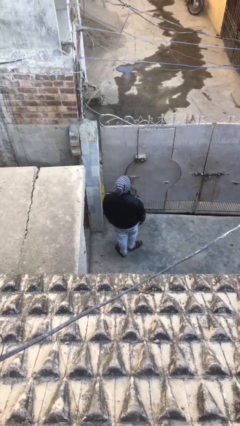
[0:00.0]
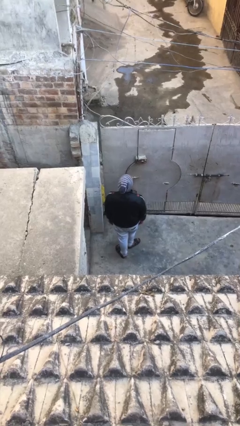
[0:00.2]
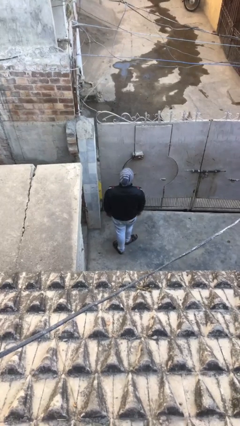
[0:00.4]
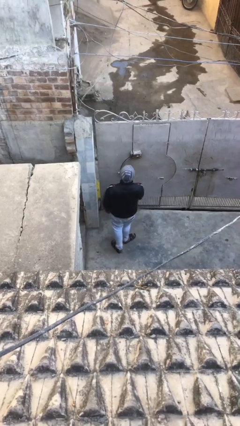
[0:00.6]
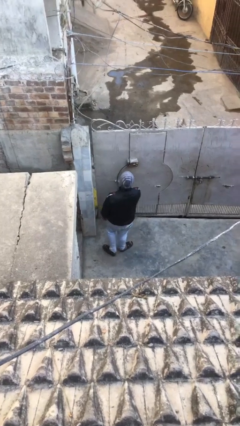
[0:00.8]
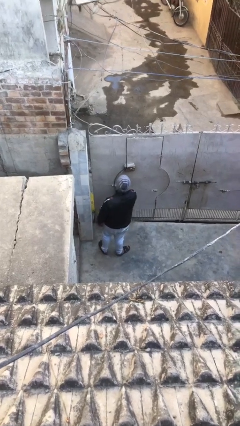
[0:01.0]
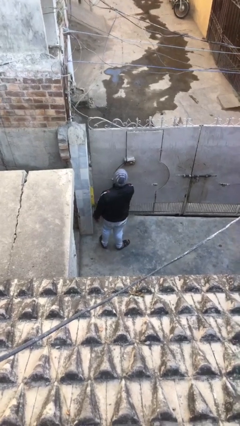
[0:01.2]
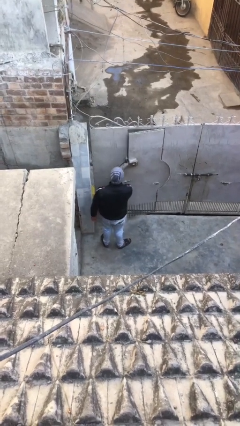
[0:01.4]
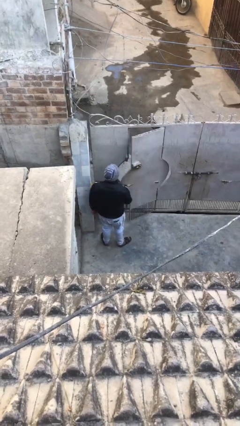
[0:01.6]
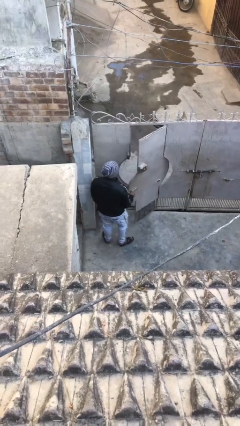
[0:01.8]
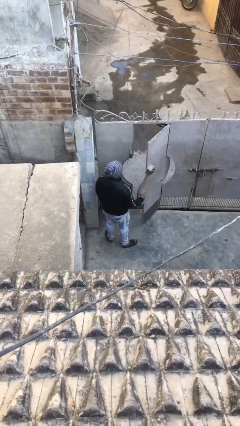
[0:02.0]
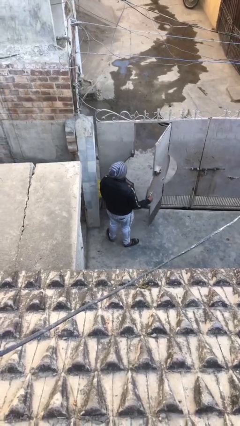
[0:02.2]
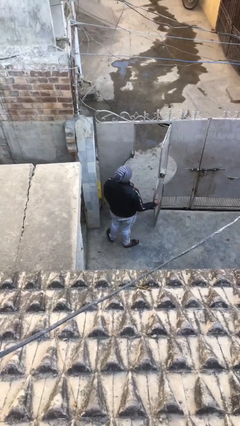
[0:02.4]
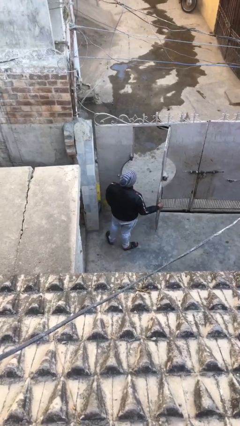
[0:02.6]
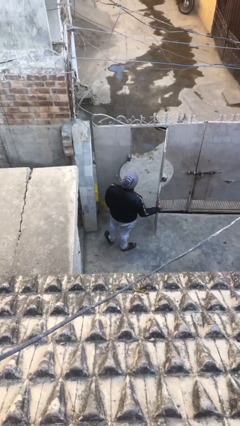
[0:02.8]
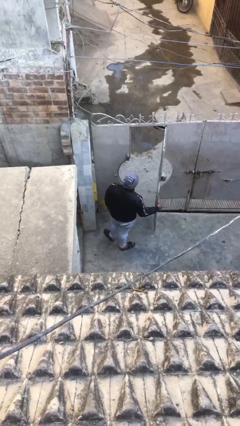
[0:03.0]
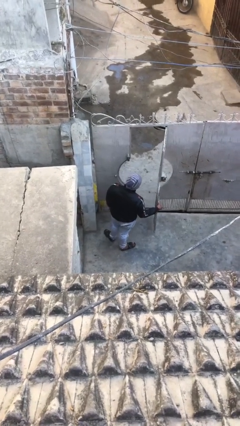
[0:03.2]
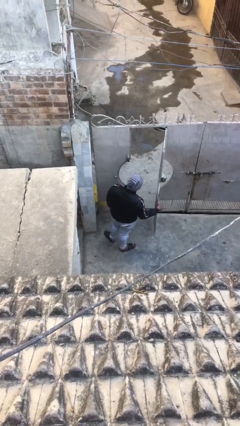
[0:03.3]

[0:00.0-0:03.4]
person opens facility door

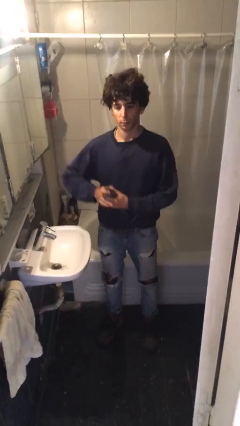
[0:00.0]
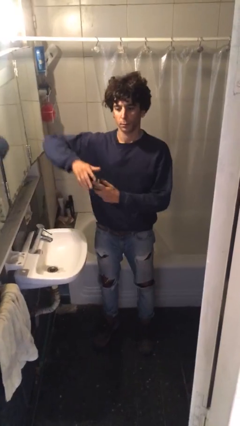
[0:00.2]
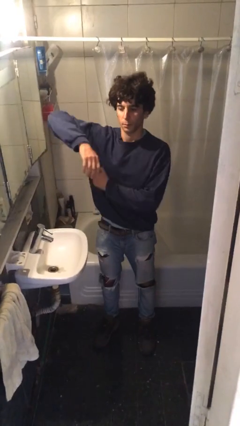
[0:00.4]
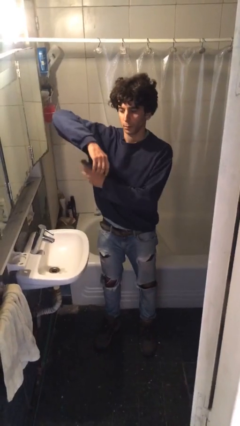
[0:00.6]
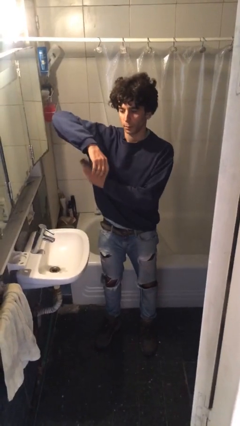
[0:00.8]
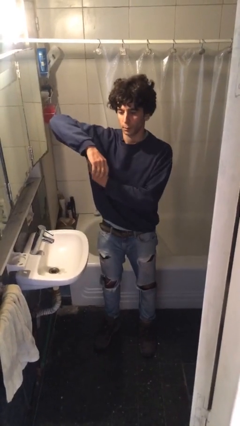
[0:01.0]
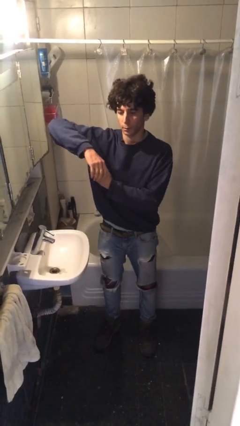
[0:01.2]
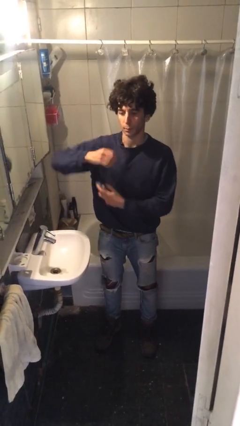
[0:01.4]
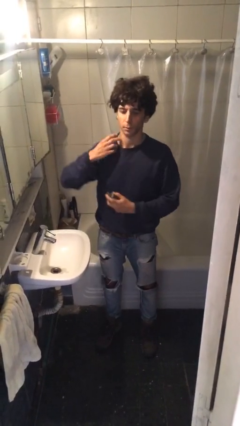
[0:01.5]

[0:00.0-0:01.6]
person applies deodorant

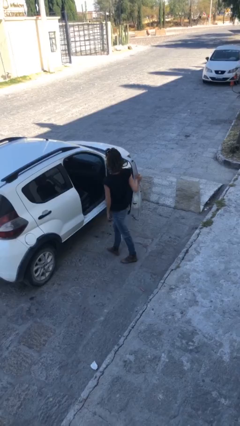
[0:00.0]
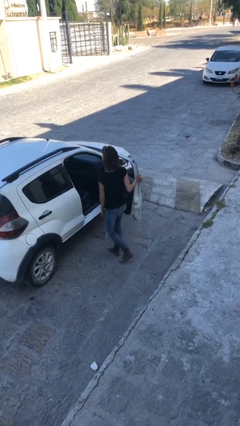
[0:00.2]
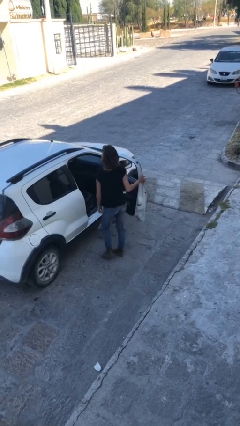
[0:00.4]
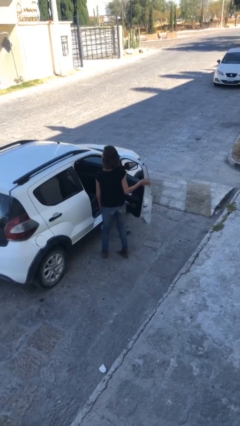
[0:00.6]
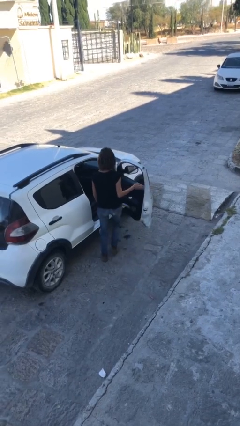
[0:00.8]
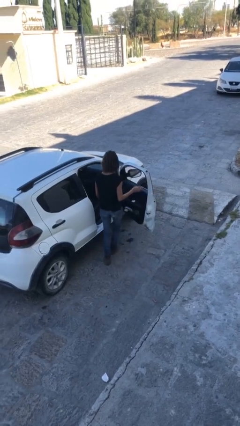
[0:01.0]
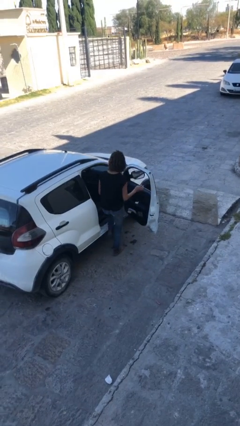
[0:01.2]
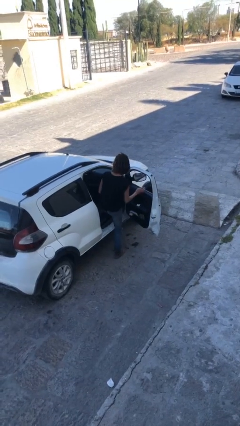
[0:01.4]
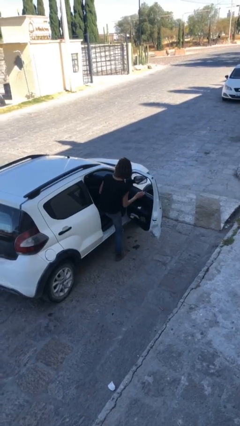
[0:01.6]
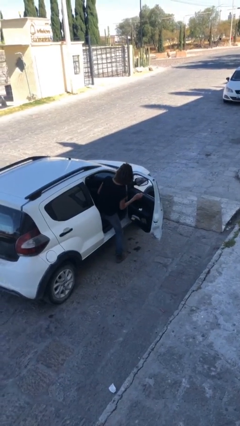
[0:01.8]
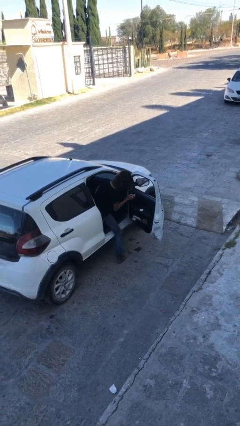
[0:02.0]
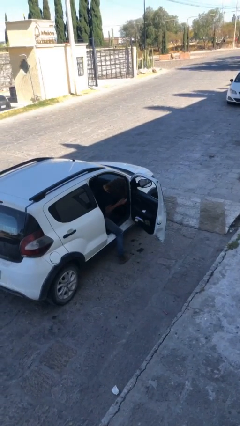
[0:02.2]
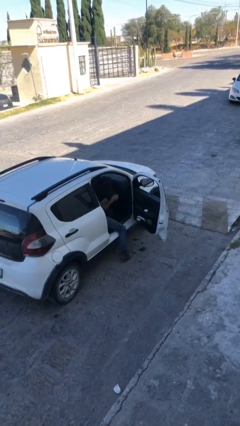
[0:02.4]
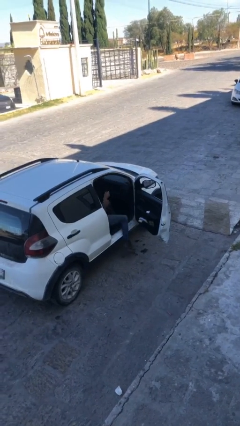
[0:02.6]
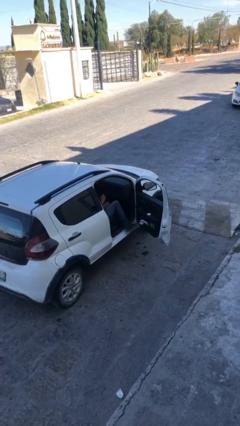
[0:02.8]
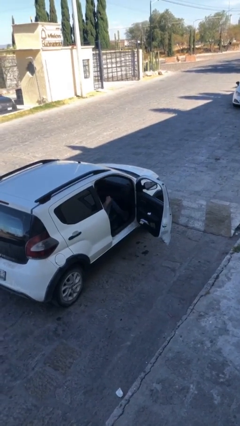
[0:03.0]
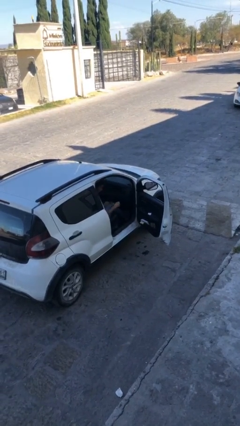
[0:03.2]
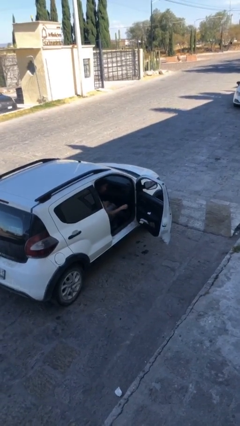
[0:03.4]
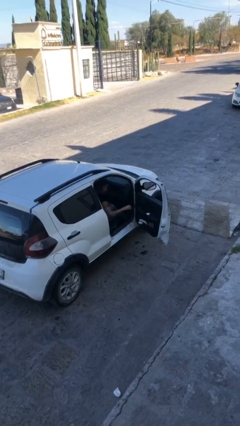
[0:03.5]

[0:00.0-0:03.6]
person enters car

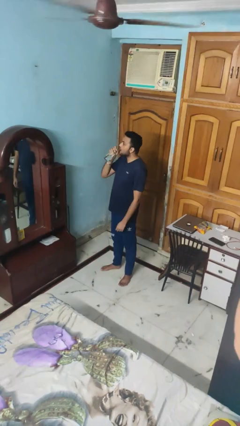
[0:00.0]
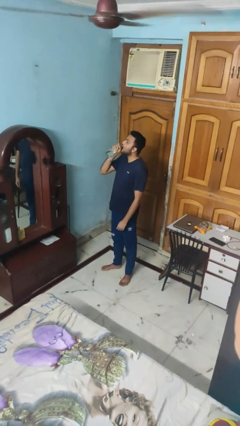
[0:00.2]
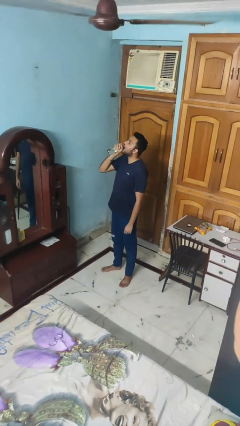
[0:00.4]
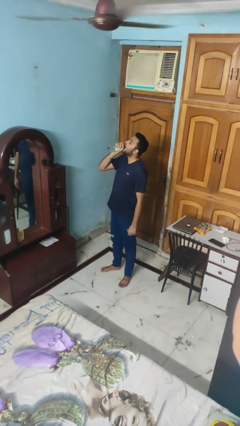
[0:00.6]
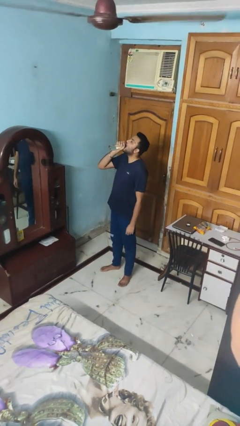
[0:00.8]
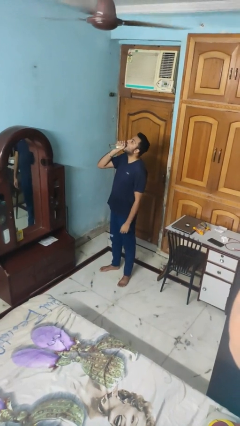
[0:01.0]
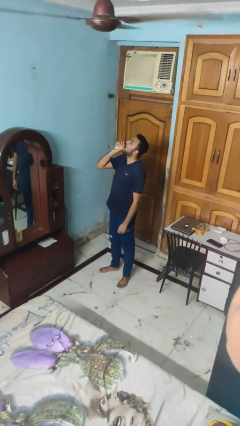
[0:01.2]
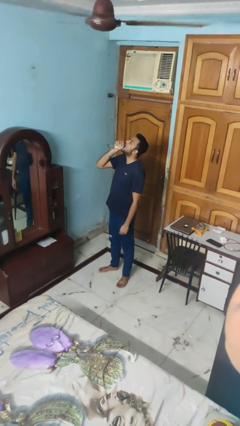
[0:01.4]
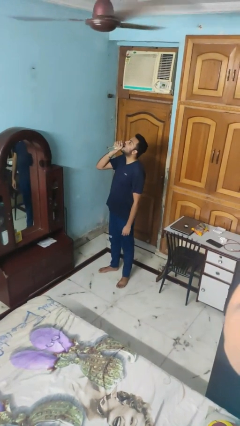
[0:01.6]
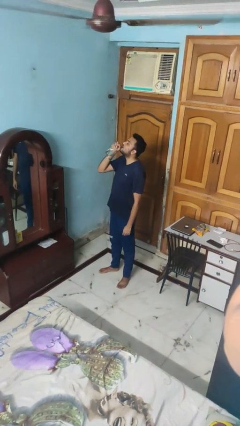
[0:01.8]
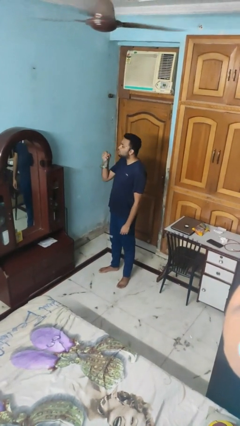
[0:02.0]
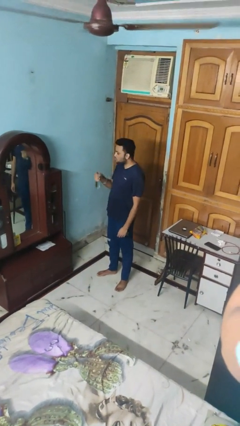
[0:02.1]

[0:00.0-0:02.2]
person drinks from bottle

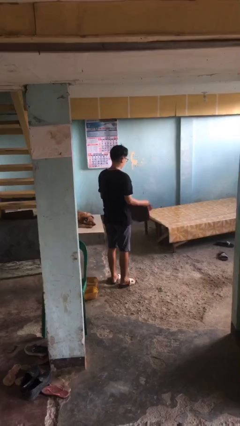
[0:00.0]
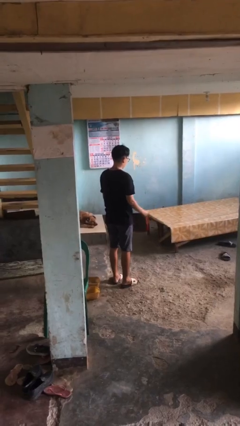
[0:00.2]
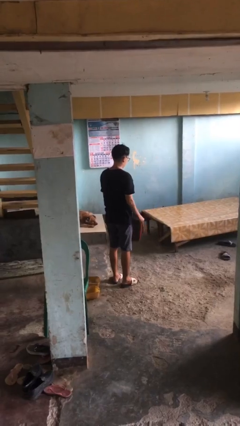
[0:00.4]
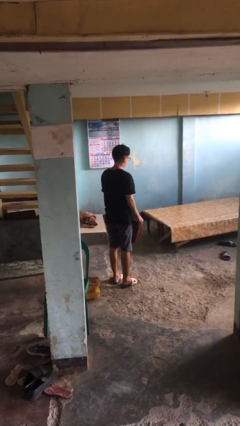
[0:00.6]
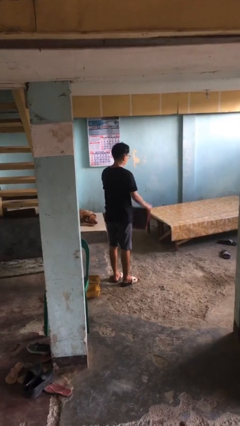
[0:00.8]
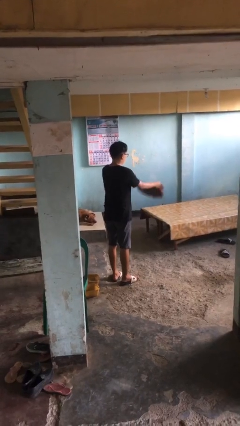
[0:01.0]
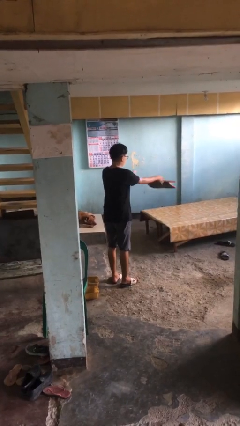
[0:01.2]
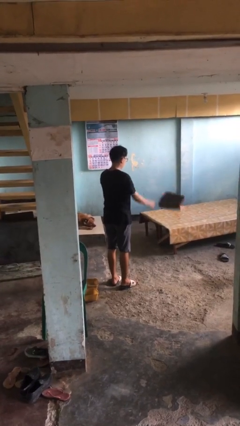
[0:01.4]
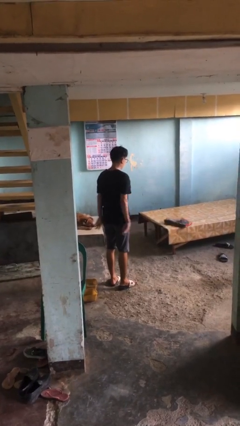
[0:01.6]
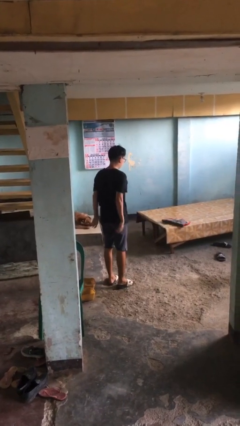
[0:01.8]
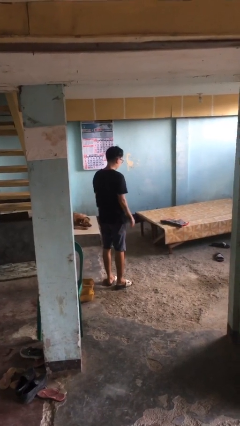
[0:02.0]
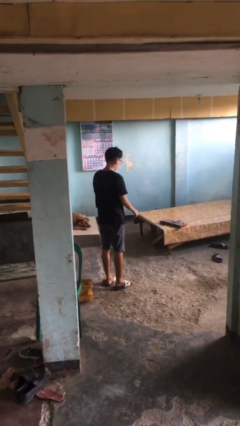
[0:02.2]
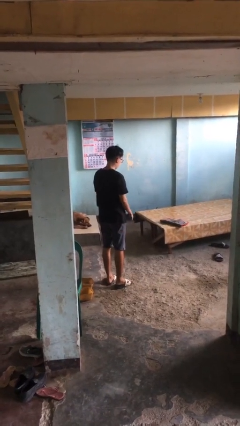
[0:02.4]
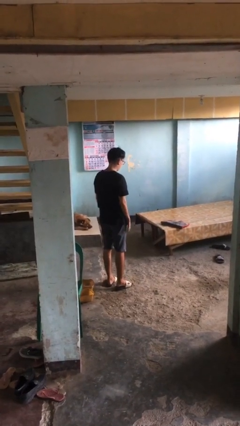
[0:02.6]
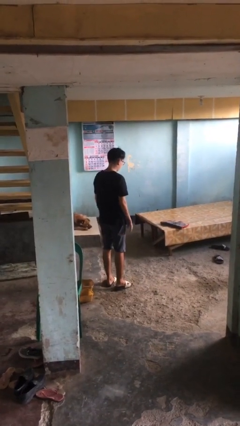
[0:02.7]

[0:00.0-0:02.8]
person throws object on bed

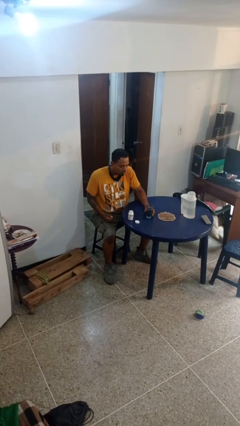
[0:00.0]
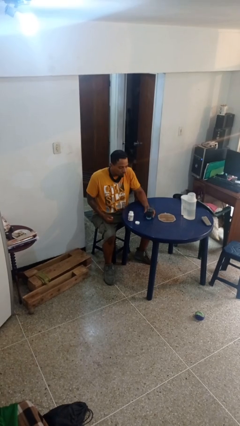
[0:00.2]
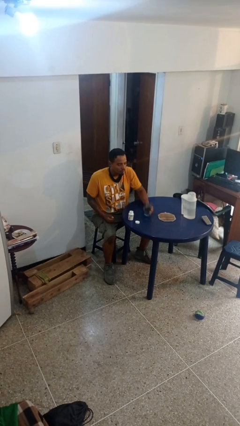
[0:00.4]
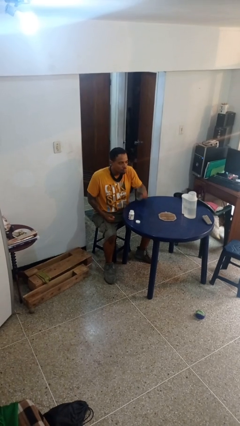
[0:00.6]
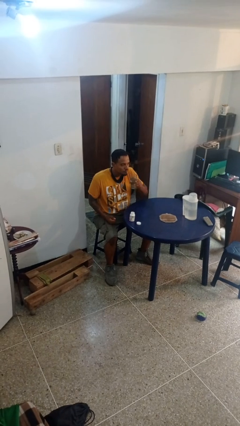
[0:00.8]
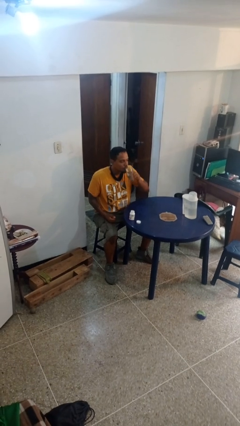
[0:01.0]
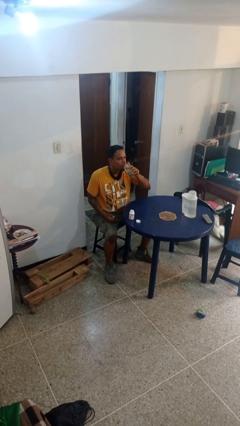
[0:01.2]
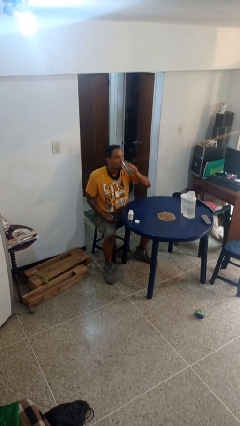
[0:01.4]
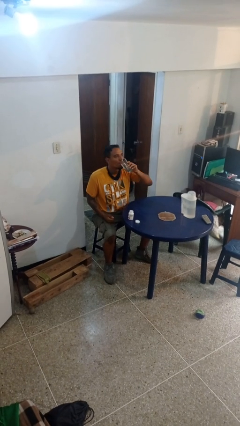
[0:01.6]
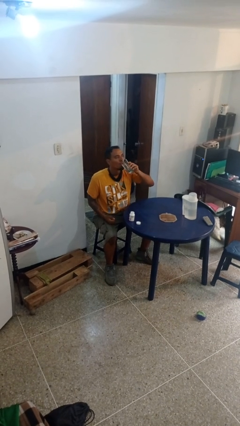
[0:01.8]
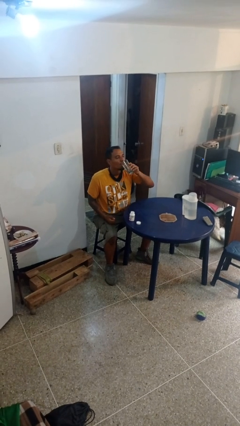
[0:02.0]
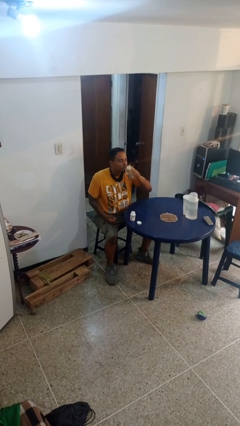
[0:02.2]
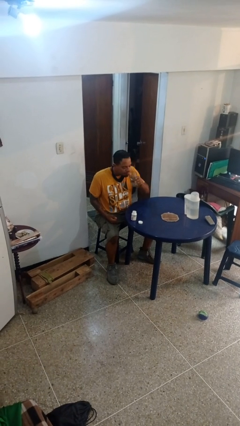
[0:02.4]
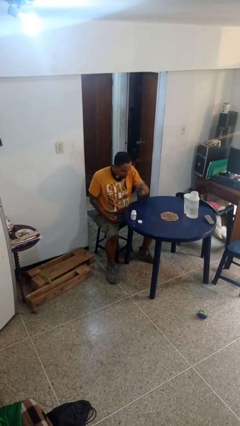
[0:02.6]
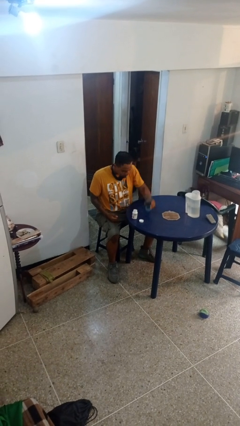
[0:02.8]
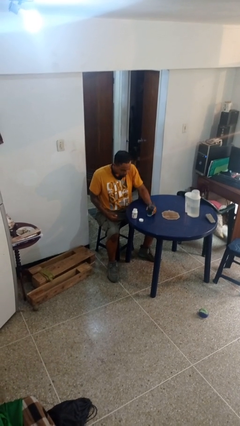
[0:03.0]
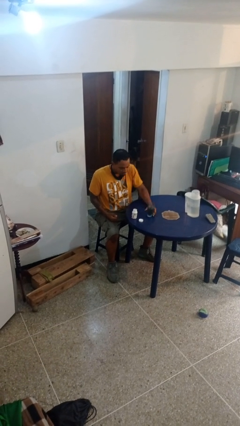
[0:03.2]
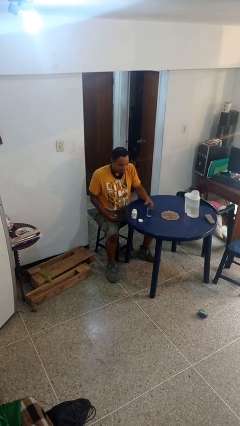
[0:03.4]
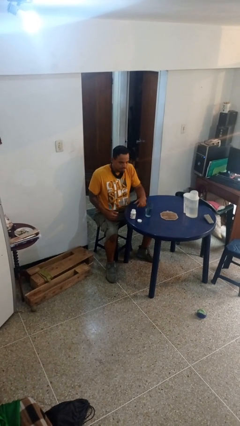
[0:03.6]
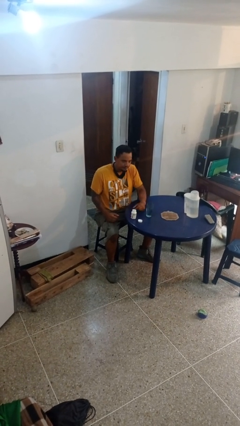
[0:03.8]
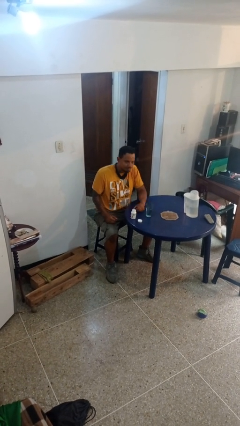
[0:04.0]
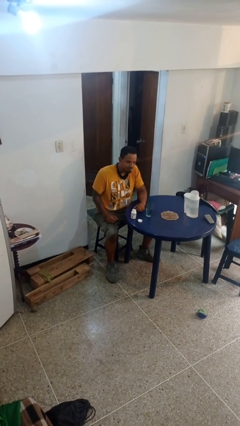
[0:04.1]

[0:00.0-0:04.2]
person drinks from cup

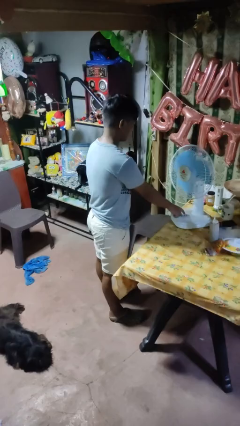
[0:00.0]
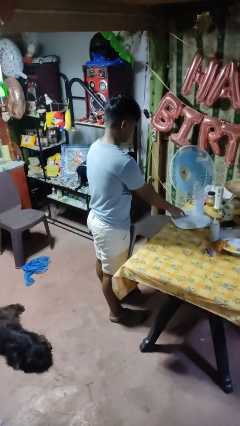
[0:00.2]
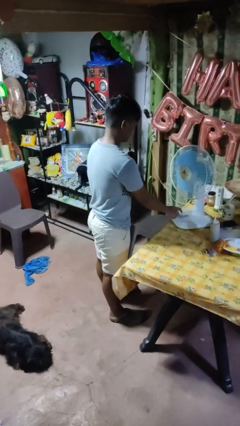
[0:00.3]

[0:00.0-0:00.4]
person turns on fan
